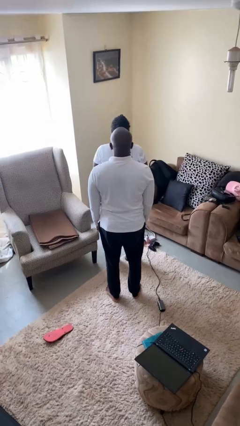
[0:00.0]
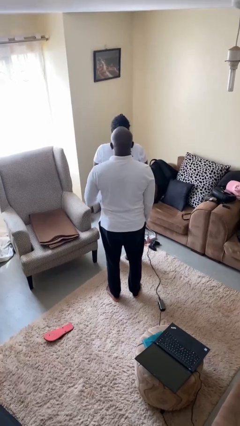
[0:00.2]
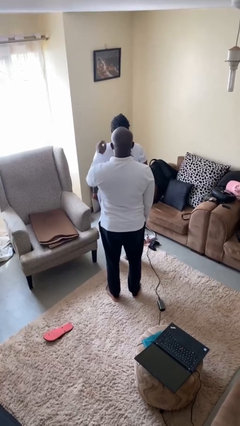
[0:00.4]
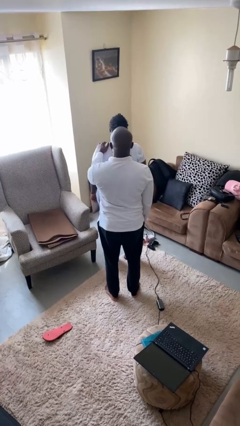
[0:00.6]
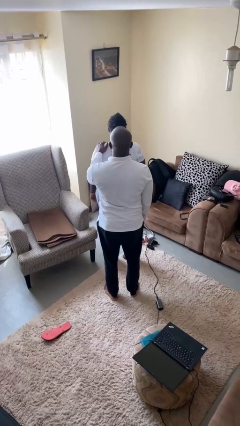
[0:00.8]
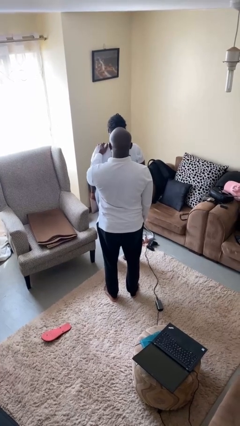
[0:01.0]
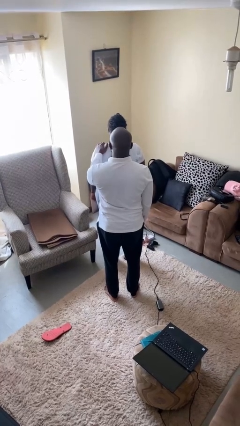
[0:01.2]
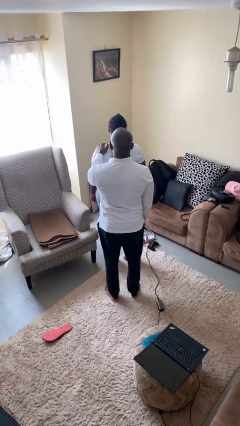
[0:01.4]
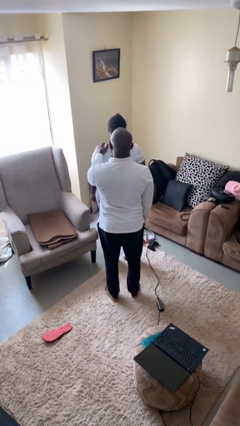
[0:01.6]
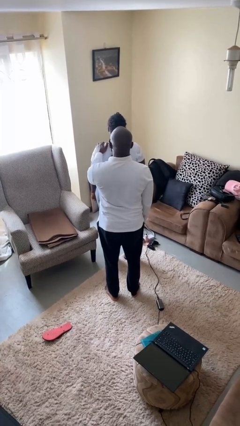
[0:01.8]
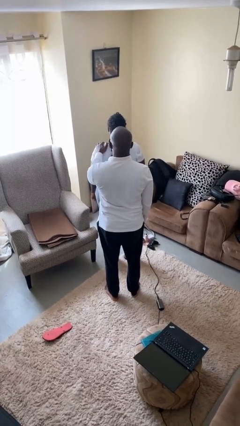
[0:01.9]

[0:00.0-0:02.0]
person grabs person by shoulder

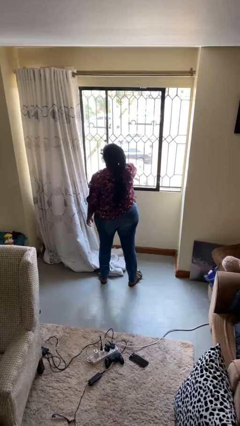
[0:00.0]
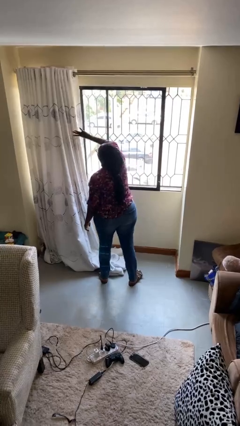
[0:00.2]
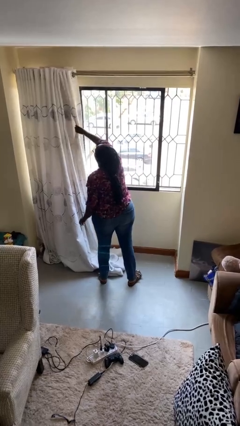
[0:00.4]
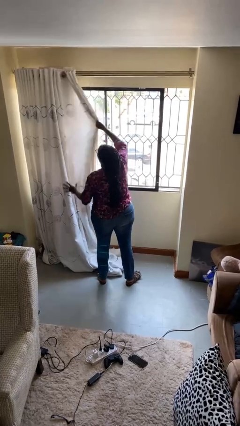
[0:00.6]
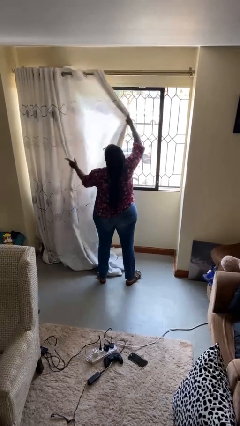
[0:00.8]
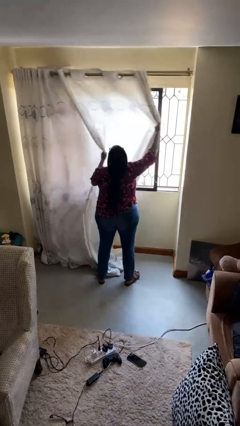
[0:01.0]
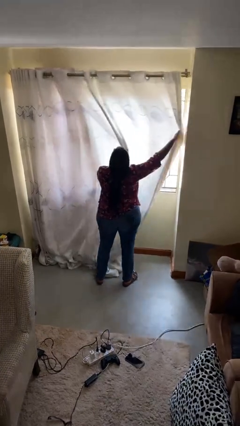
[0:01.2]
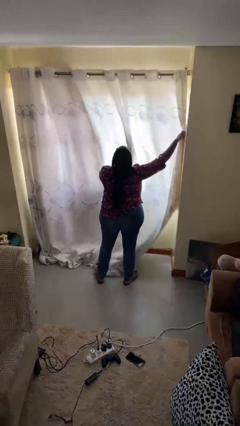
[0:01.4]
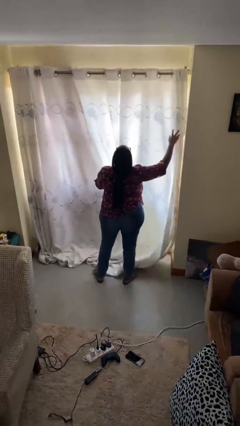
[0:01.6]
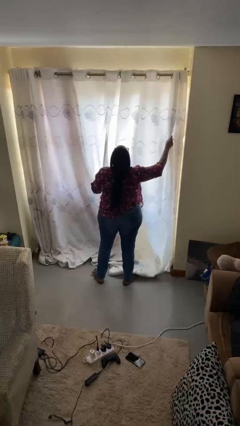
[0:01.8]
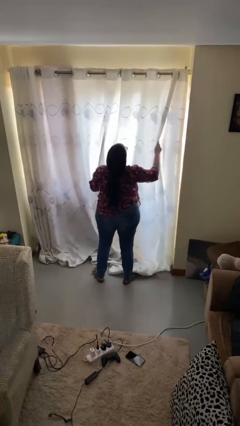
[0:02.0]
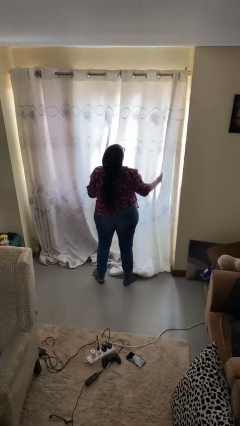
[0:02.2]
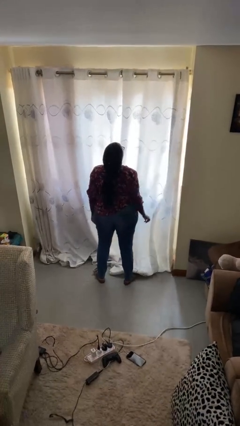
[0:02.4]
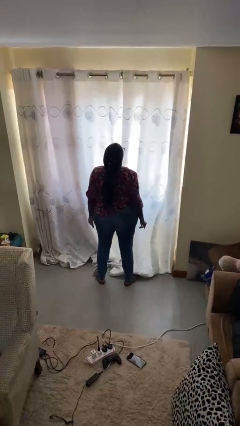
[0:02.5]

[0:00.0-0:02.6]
person closes curtains

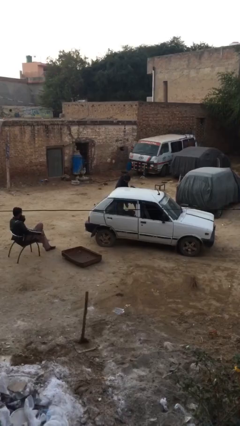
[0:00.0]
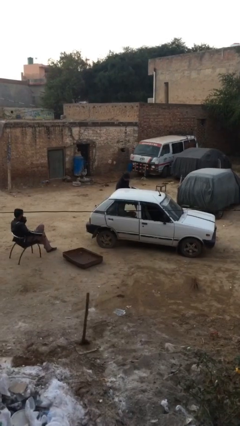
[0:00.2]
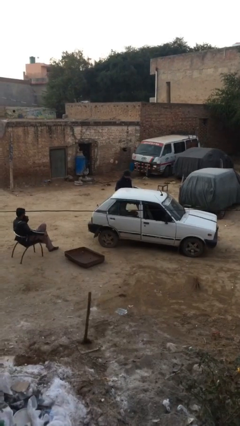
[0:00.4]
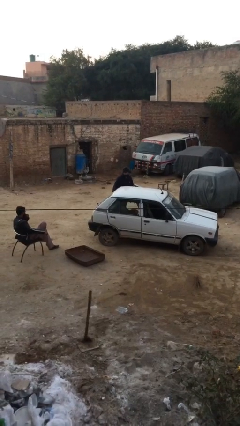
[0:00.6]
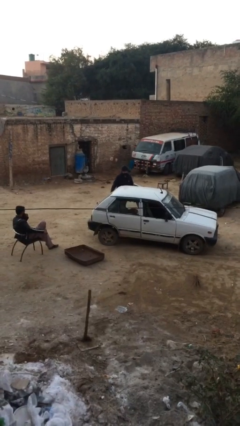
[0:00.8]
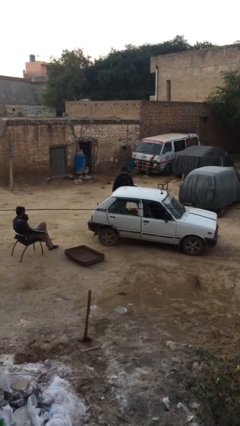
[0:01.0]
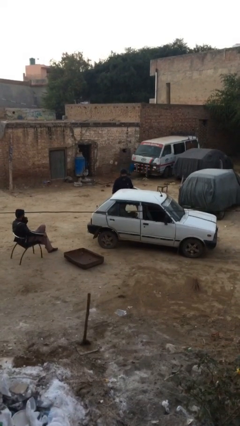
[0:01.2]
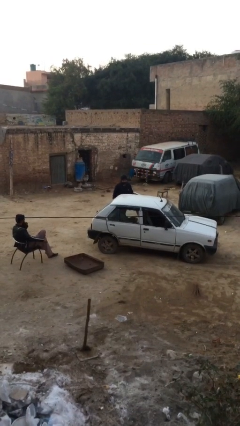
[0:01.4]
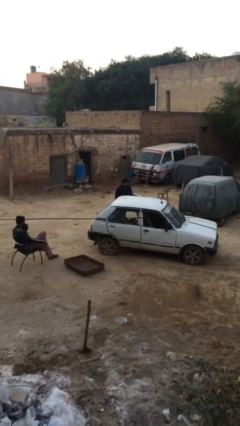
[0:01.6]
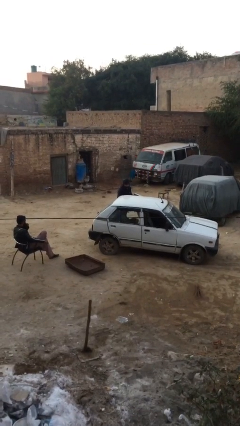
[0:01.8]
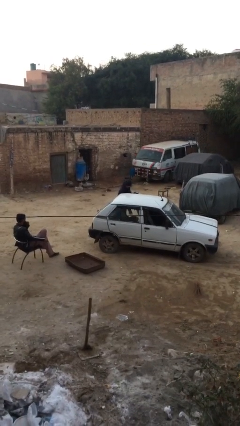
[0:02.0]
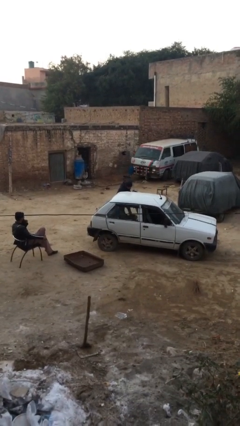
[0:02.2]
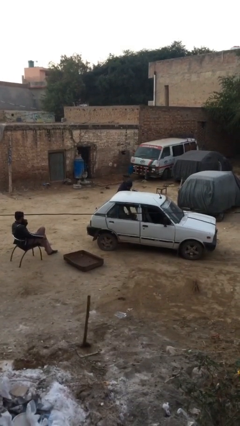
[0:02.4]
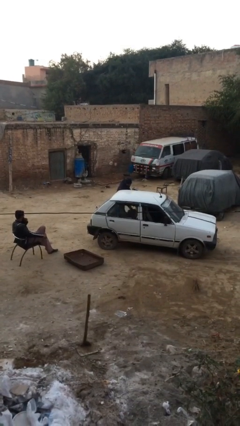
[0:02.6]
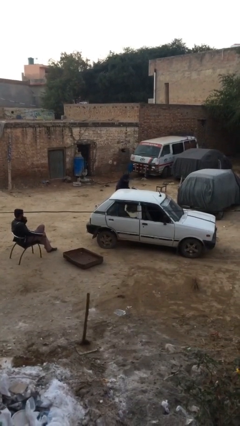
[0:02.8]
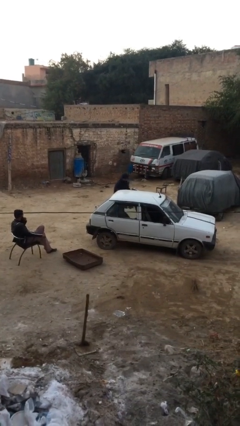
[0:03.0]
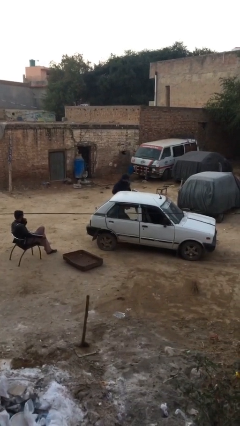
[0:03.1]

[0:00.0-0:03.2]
person unloads car

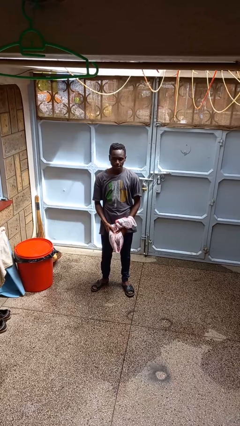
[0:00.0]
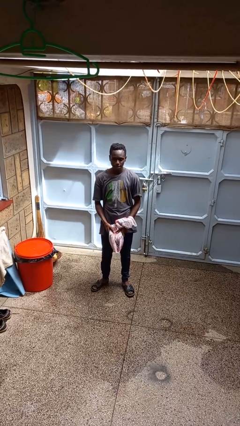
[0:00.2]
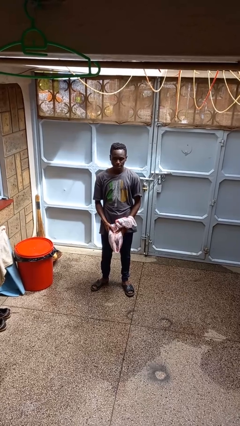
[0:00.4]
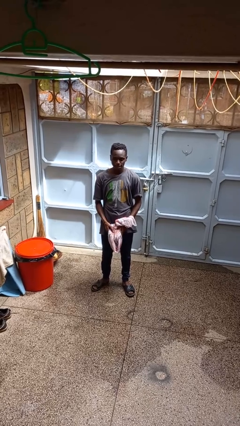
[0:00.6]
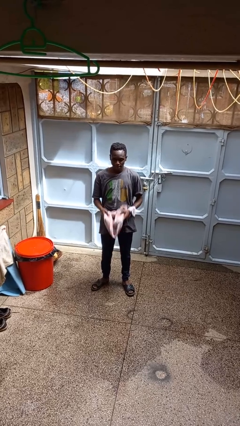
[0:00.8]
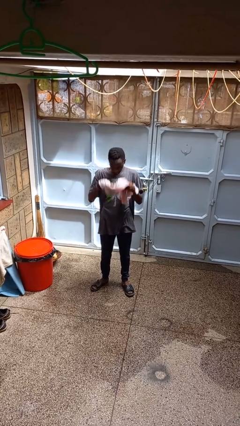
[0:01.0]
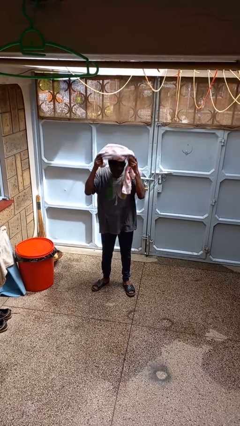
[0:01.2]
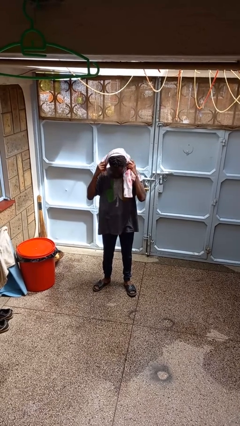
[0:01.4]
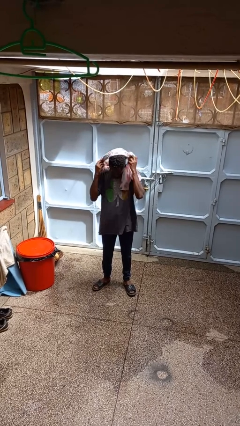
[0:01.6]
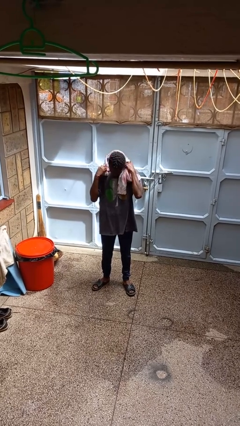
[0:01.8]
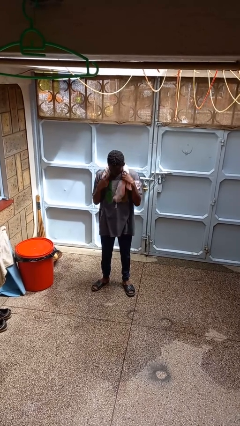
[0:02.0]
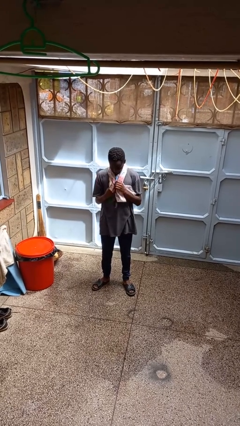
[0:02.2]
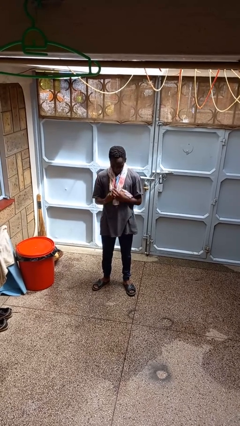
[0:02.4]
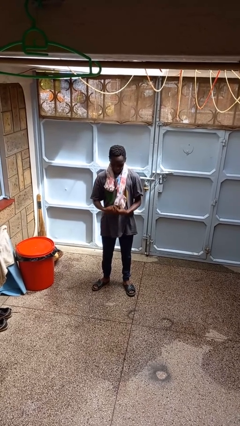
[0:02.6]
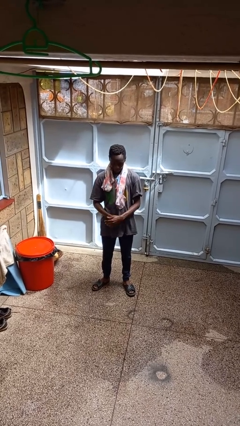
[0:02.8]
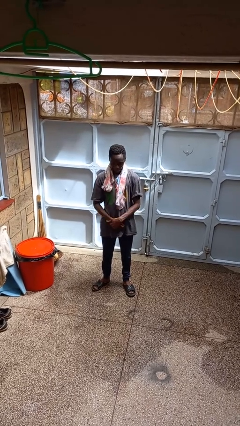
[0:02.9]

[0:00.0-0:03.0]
person puts on scarf

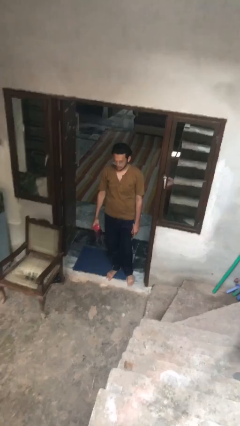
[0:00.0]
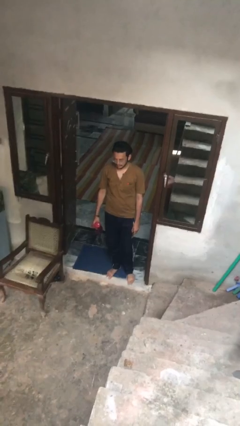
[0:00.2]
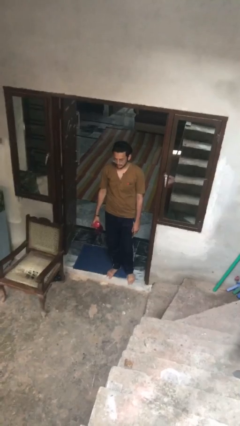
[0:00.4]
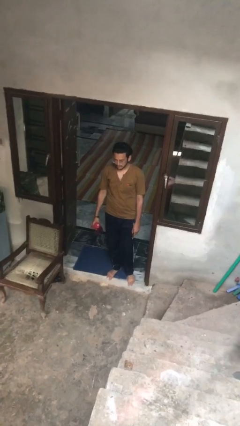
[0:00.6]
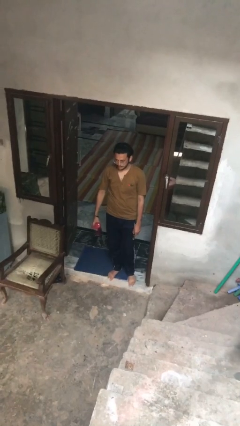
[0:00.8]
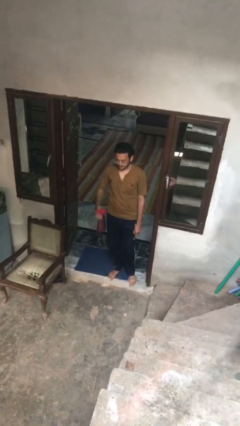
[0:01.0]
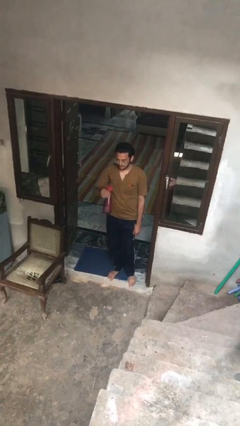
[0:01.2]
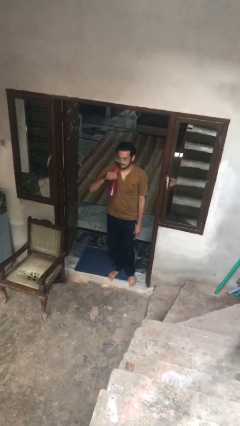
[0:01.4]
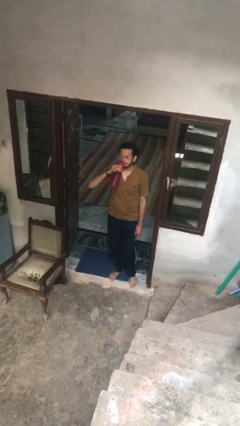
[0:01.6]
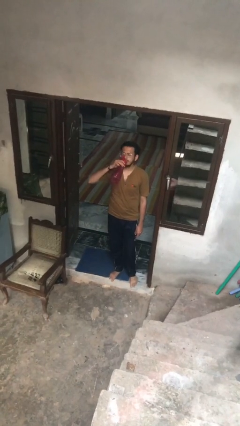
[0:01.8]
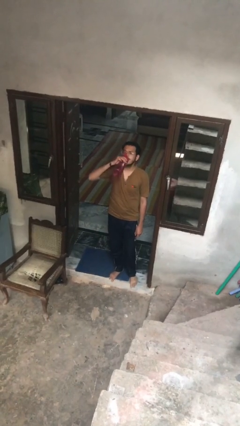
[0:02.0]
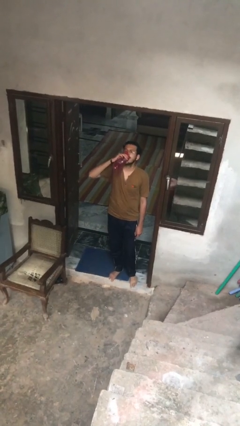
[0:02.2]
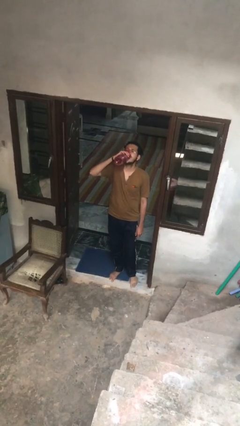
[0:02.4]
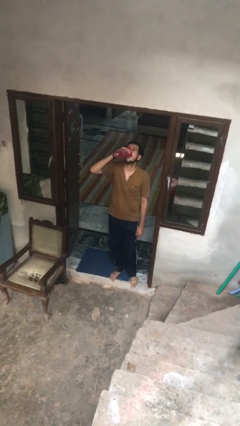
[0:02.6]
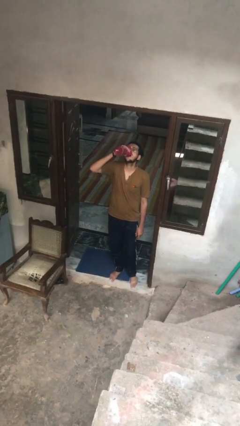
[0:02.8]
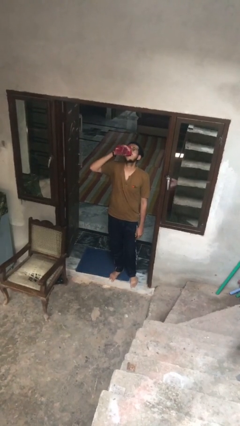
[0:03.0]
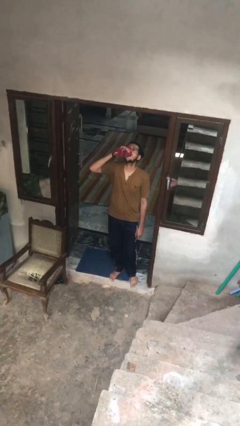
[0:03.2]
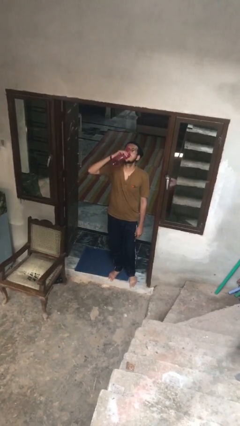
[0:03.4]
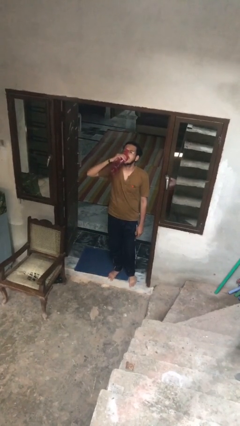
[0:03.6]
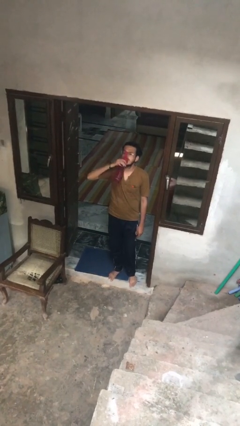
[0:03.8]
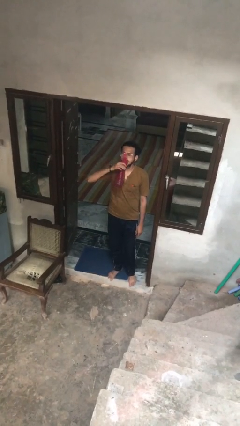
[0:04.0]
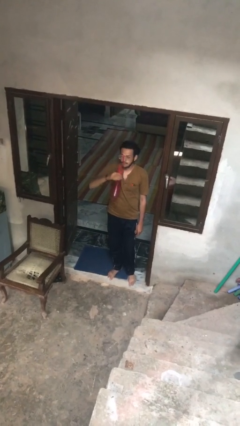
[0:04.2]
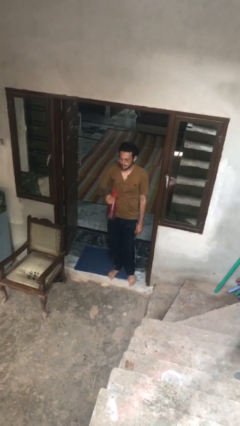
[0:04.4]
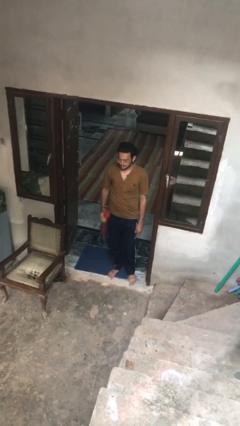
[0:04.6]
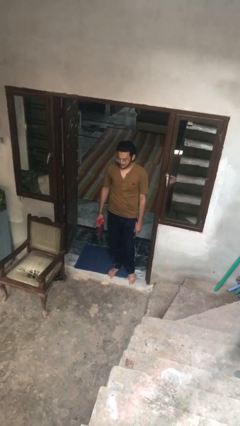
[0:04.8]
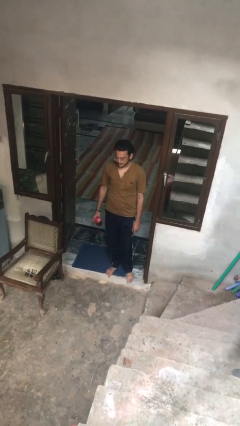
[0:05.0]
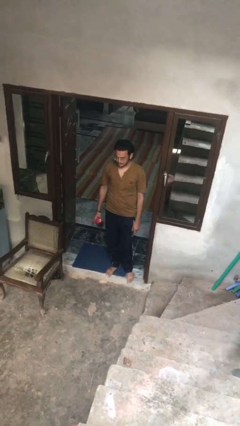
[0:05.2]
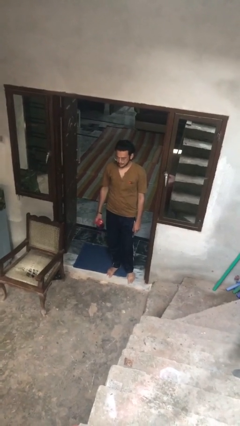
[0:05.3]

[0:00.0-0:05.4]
person drinks from bottle

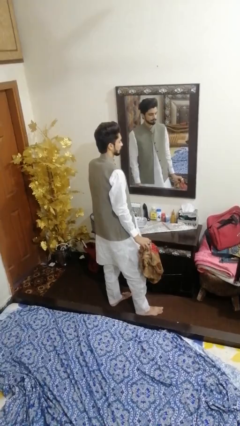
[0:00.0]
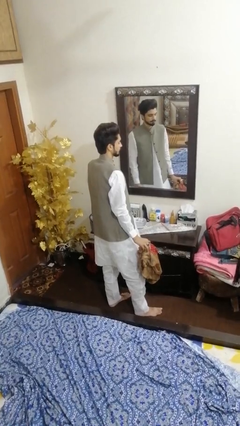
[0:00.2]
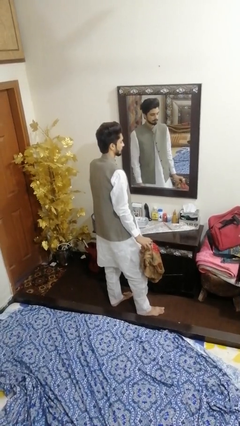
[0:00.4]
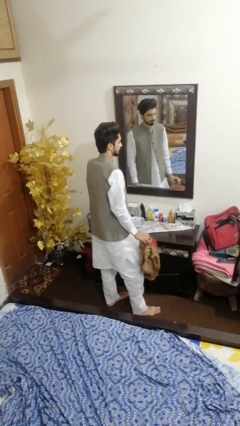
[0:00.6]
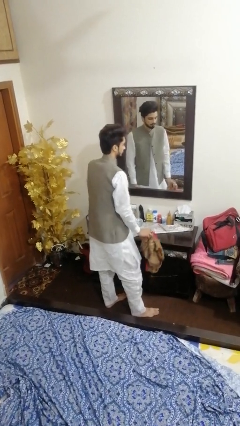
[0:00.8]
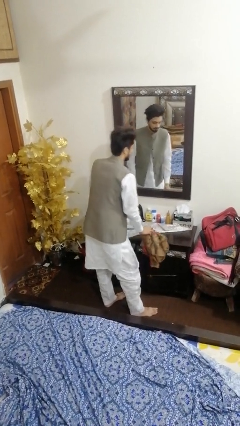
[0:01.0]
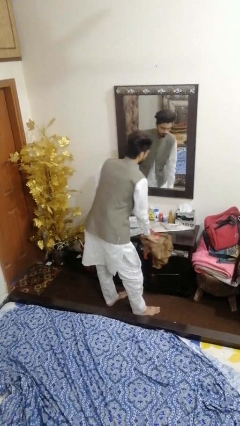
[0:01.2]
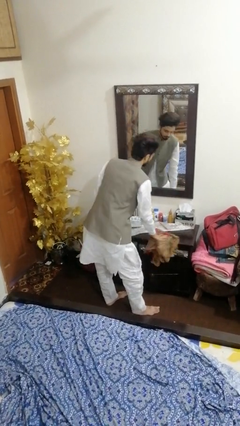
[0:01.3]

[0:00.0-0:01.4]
person cleans table with rag

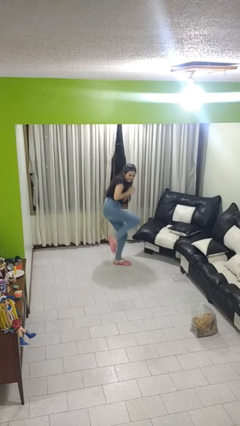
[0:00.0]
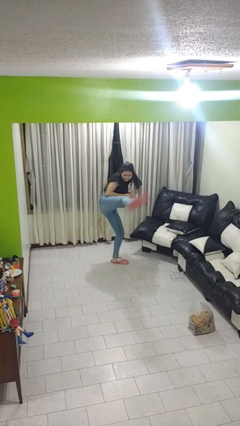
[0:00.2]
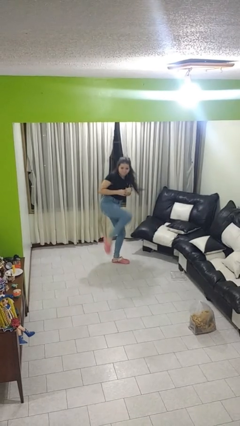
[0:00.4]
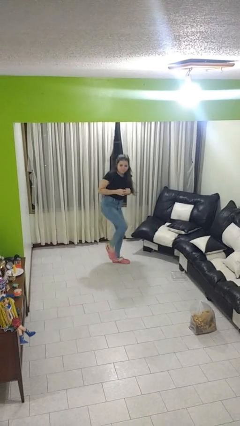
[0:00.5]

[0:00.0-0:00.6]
person karate kicks
